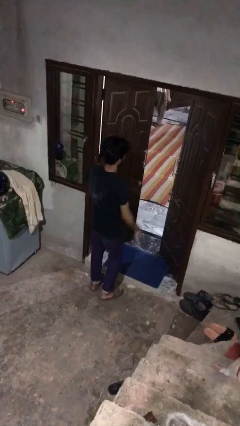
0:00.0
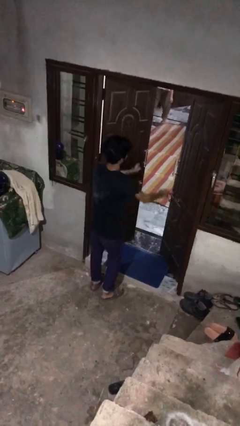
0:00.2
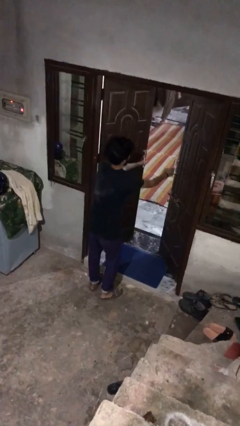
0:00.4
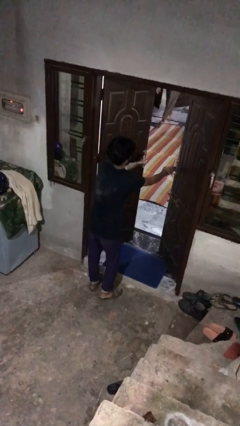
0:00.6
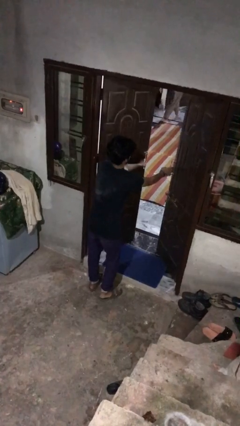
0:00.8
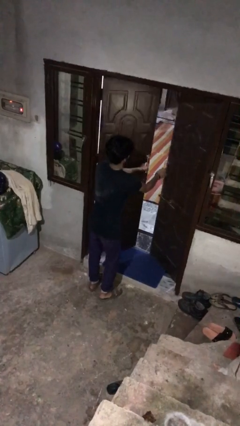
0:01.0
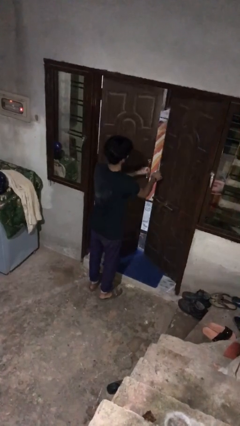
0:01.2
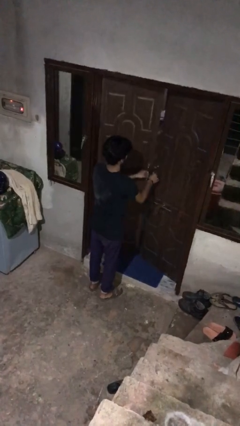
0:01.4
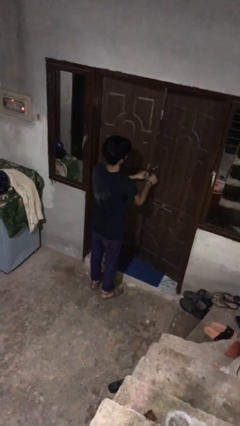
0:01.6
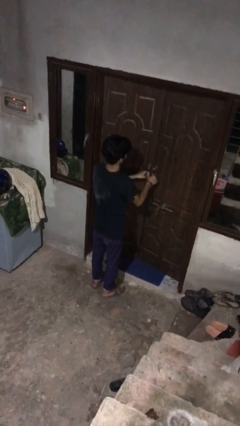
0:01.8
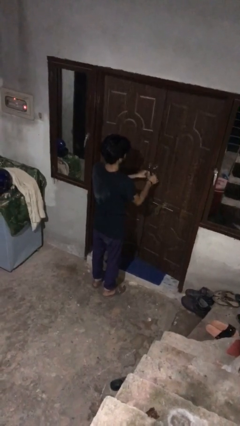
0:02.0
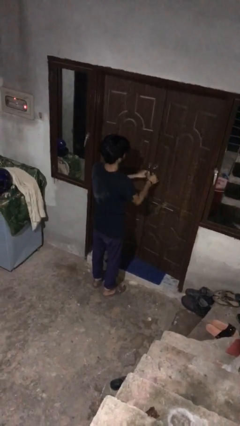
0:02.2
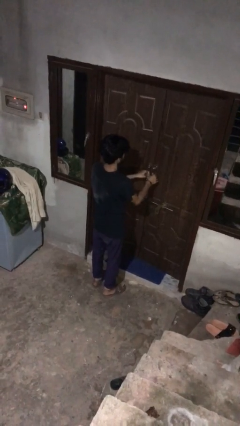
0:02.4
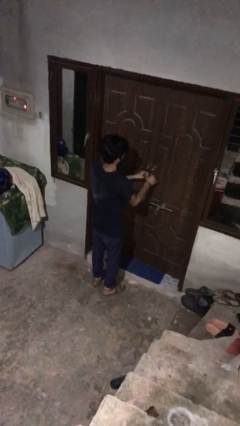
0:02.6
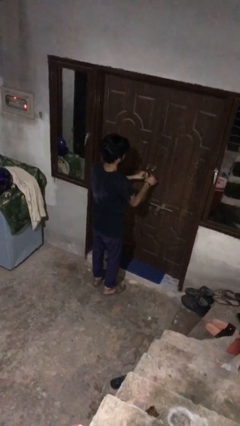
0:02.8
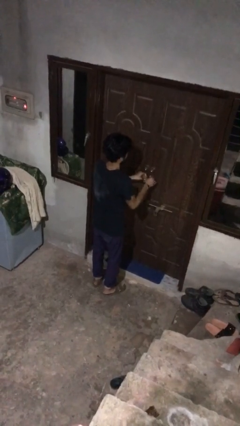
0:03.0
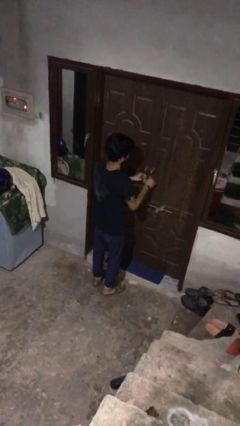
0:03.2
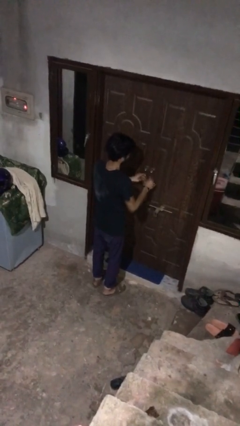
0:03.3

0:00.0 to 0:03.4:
person closes facility door

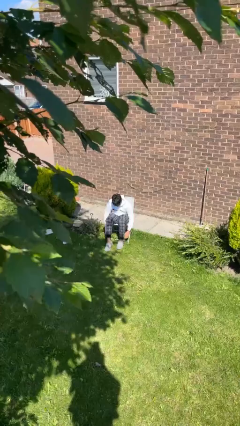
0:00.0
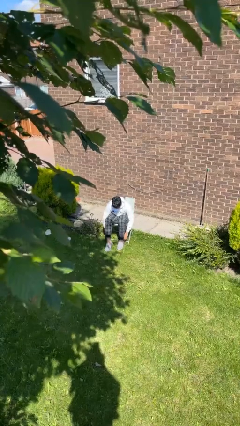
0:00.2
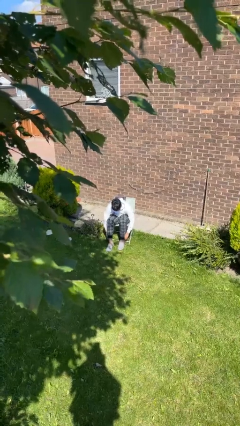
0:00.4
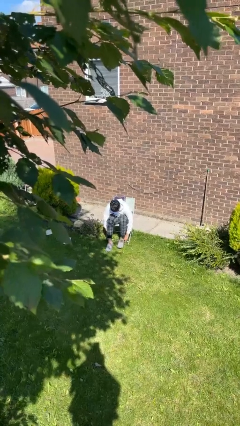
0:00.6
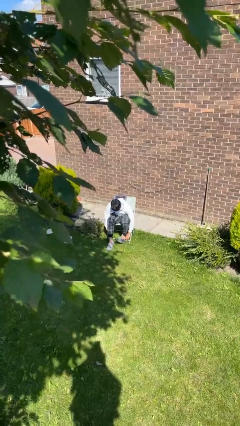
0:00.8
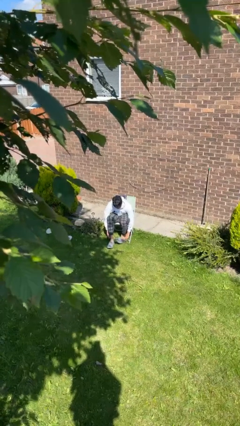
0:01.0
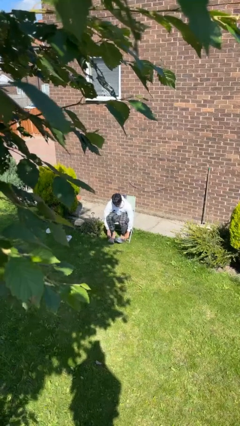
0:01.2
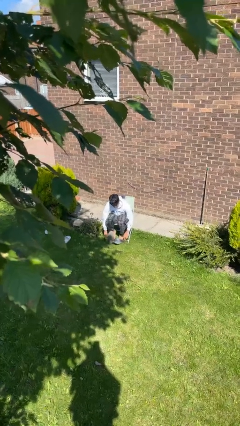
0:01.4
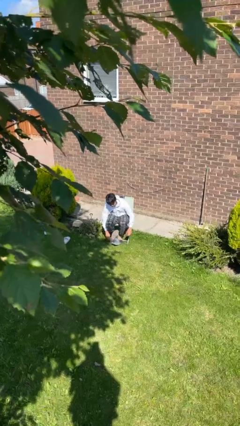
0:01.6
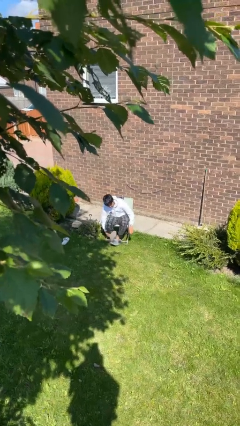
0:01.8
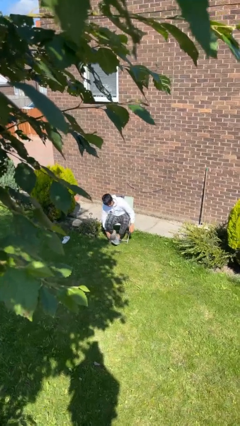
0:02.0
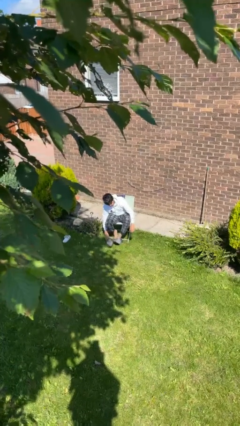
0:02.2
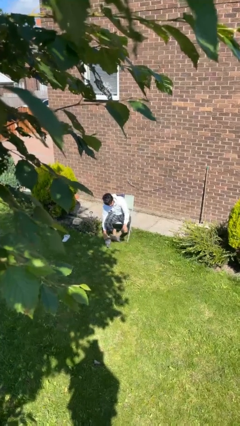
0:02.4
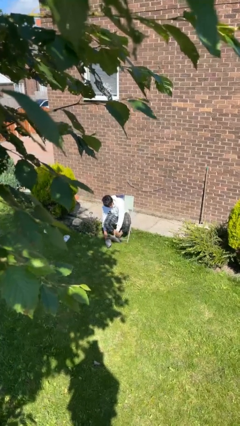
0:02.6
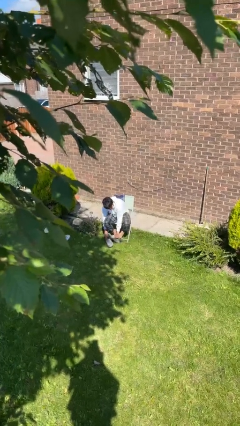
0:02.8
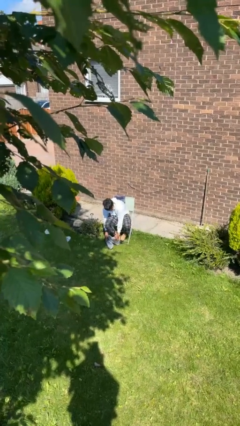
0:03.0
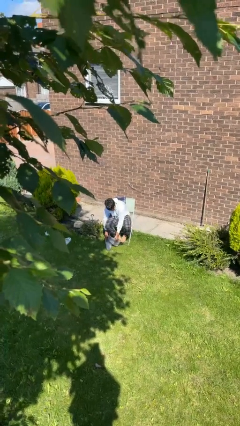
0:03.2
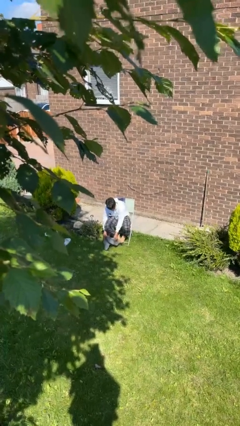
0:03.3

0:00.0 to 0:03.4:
person takes off shoes

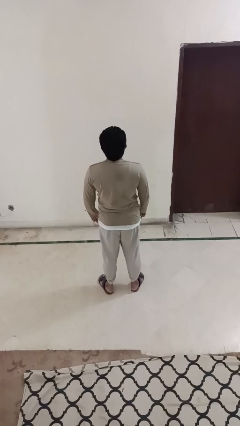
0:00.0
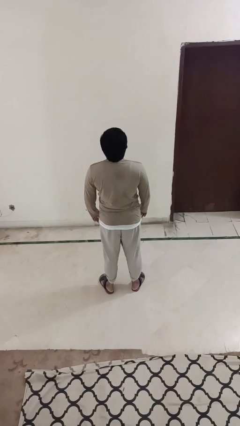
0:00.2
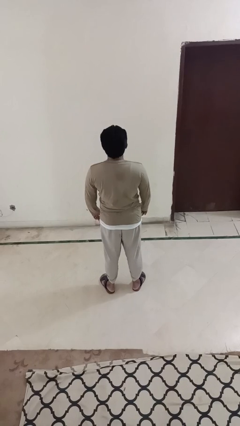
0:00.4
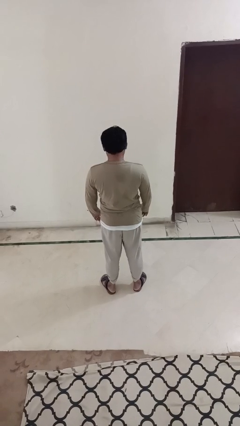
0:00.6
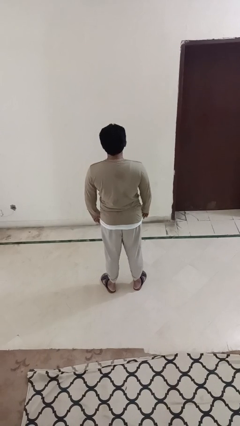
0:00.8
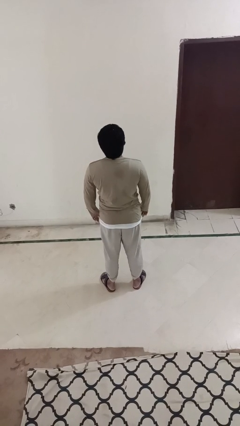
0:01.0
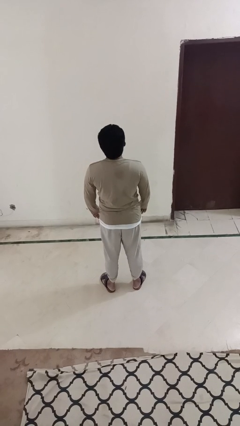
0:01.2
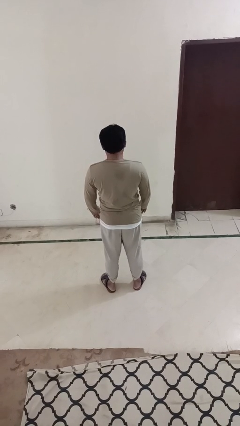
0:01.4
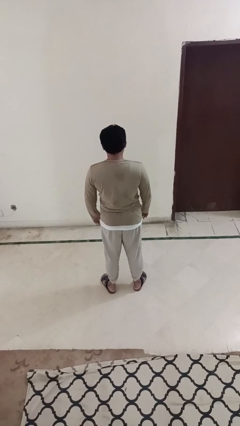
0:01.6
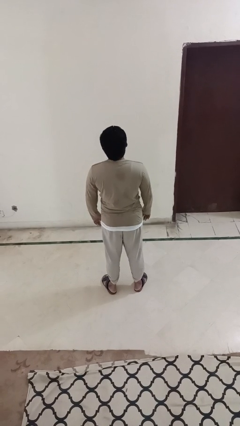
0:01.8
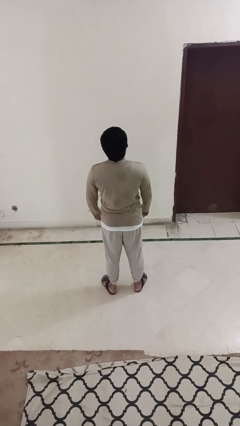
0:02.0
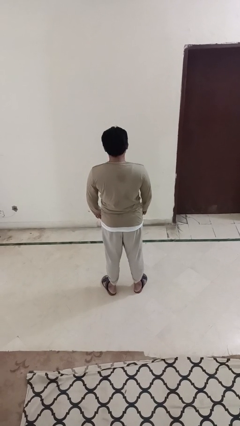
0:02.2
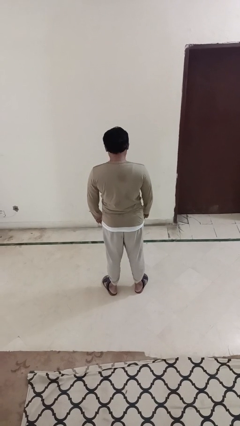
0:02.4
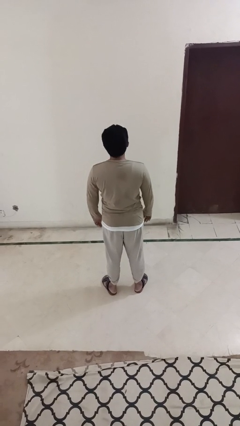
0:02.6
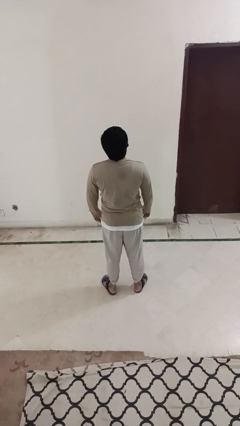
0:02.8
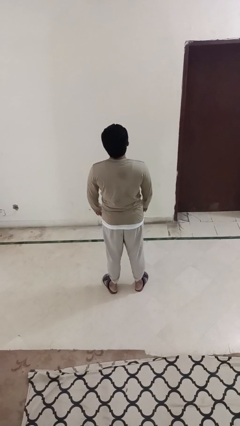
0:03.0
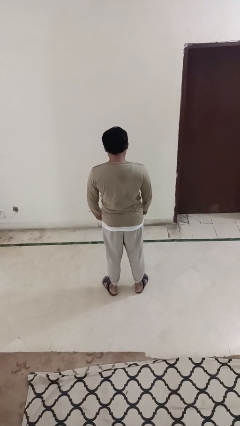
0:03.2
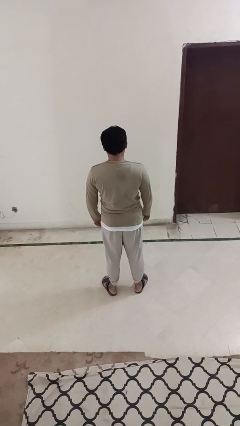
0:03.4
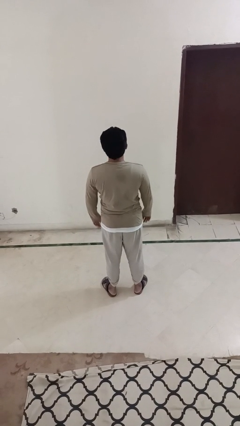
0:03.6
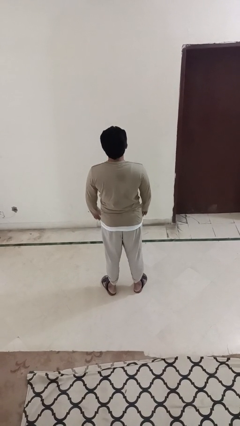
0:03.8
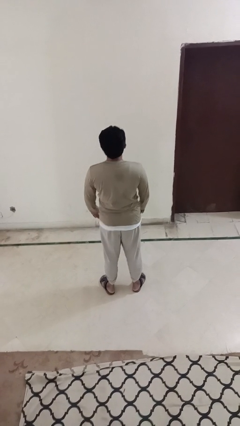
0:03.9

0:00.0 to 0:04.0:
person nods head

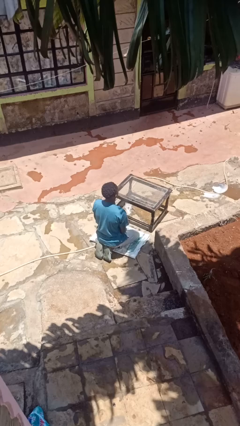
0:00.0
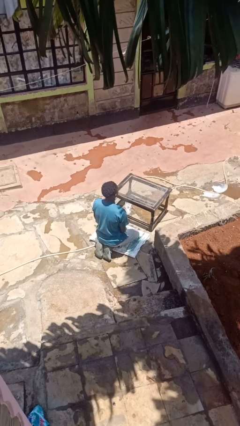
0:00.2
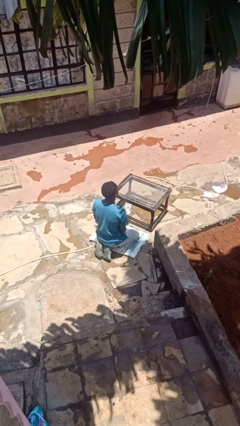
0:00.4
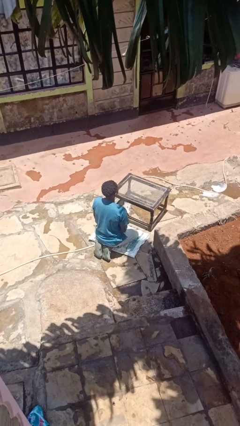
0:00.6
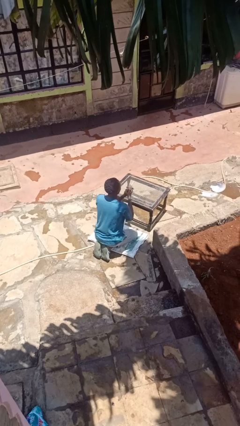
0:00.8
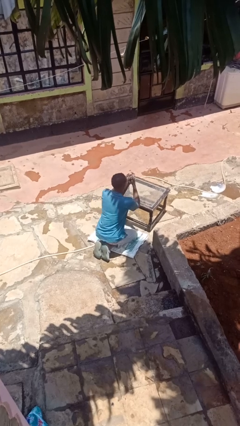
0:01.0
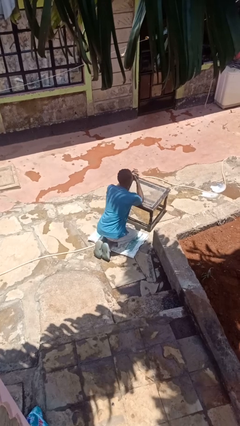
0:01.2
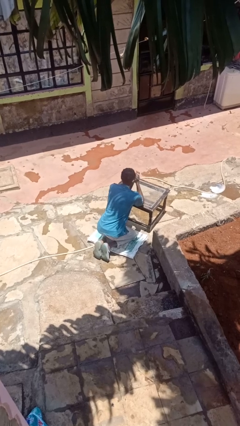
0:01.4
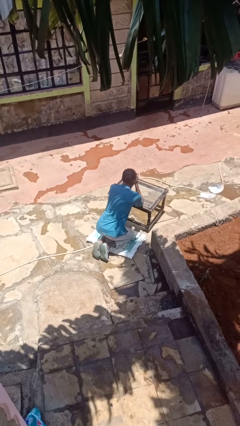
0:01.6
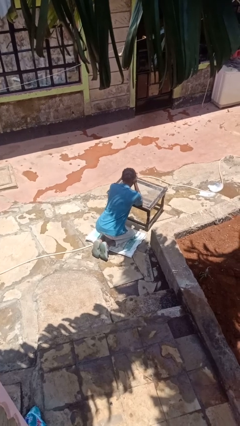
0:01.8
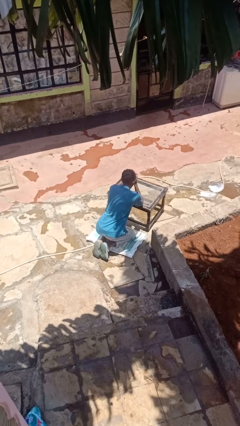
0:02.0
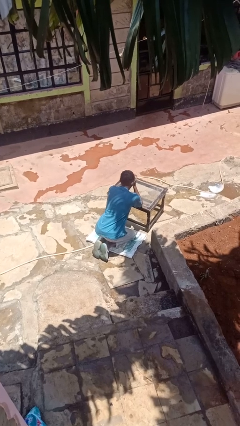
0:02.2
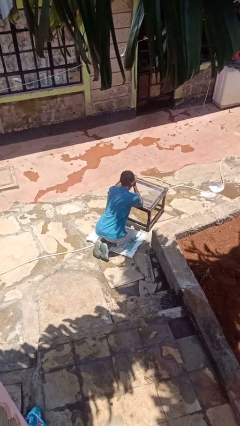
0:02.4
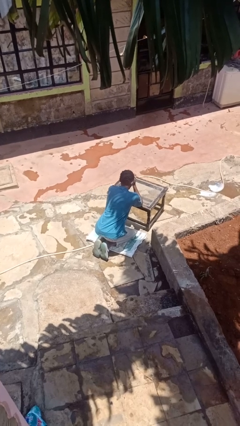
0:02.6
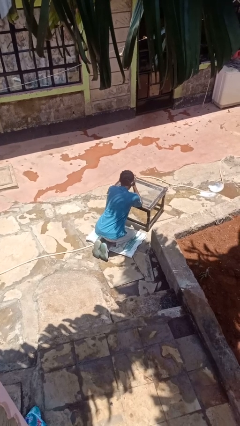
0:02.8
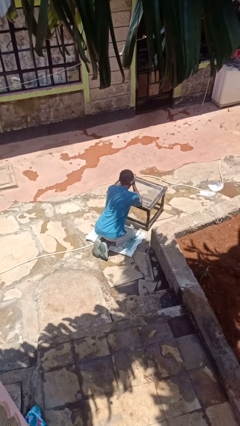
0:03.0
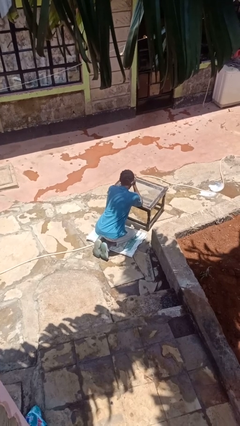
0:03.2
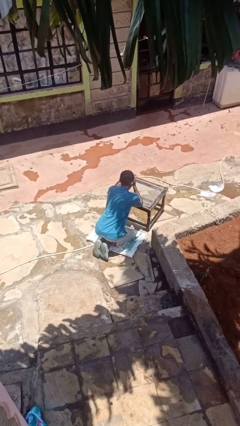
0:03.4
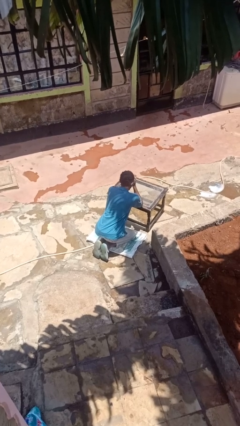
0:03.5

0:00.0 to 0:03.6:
person prays

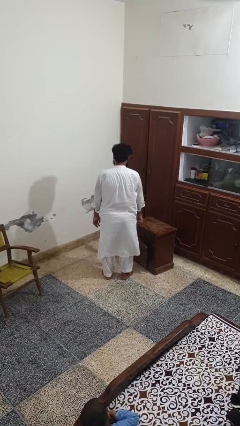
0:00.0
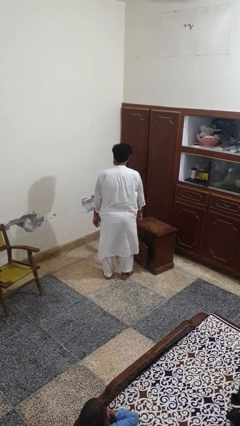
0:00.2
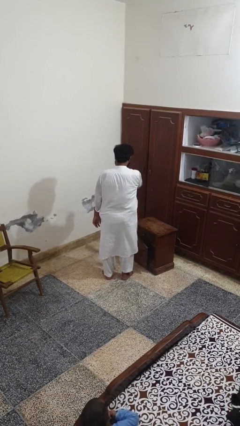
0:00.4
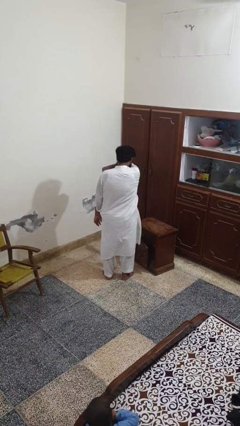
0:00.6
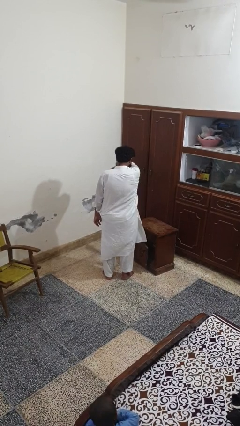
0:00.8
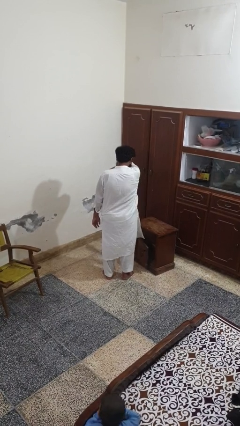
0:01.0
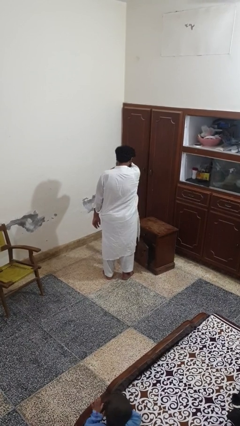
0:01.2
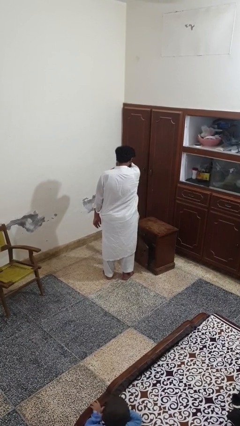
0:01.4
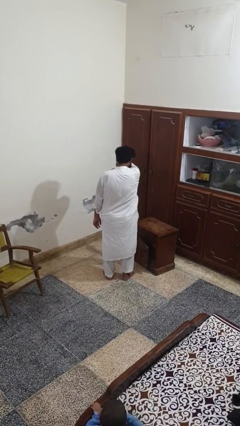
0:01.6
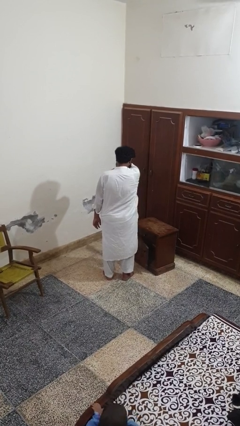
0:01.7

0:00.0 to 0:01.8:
person sneezes into arm

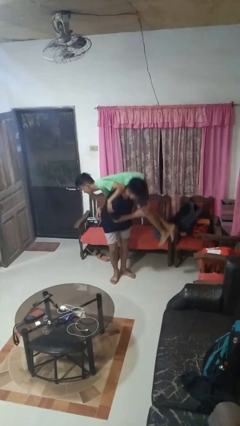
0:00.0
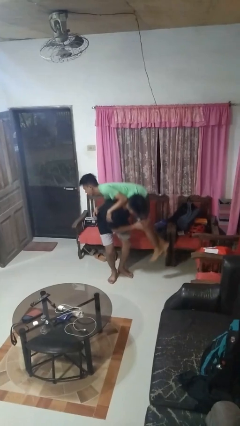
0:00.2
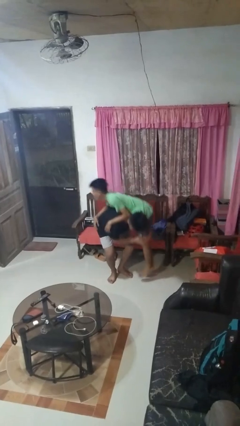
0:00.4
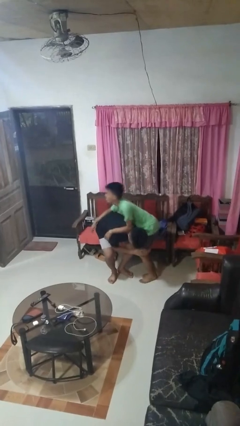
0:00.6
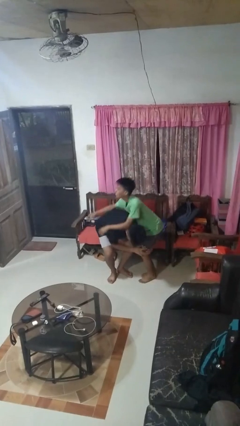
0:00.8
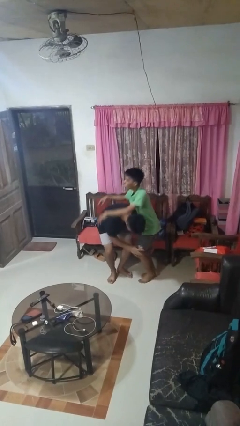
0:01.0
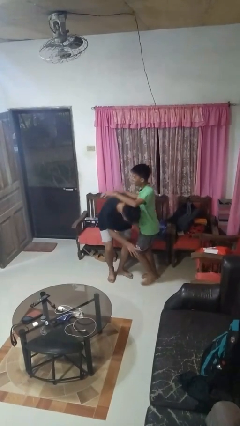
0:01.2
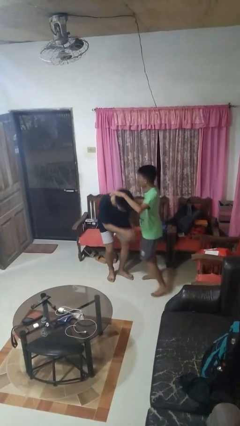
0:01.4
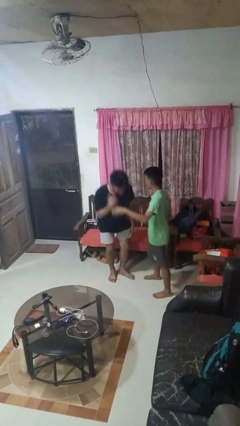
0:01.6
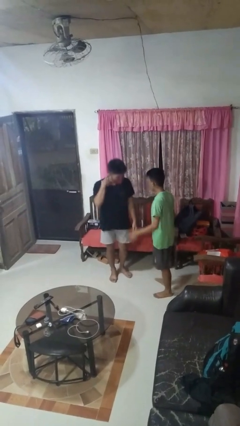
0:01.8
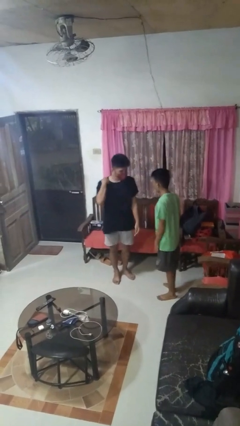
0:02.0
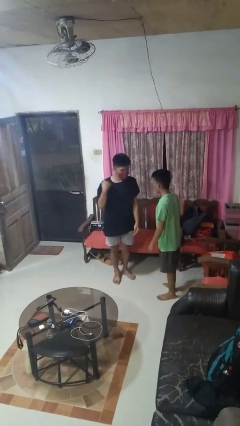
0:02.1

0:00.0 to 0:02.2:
person puts down person
